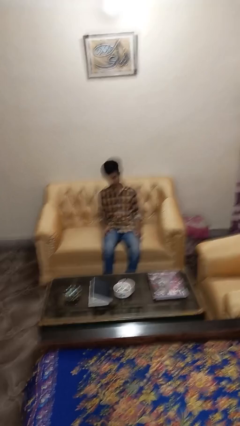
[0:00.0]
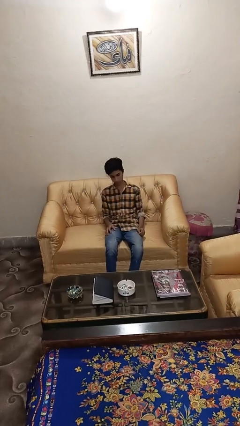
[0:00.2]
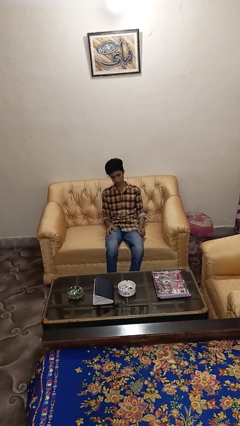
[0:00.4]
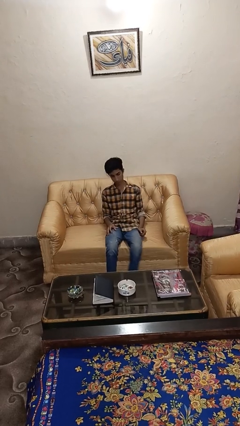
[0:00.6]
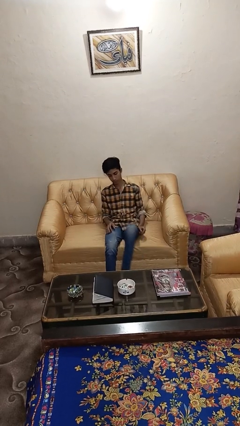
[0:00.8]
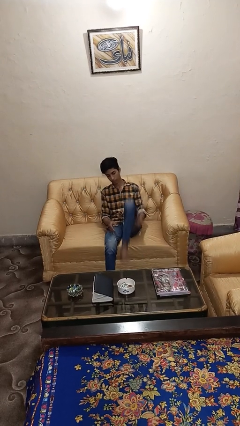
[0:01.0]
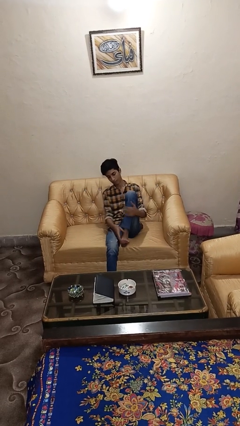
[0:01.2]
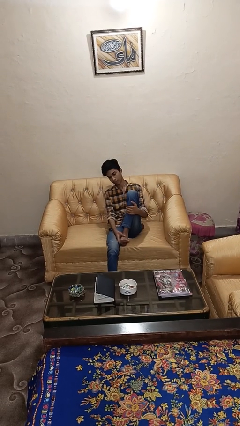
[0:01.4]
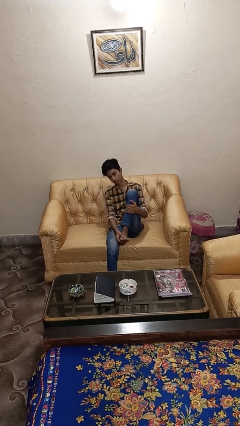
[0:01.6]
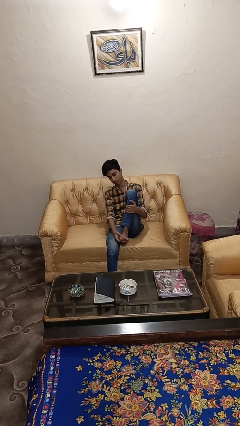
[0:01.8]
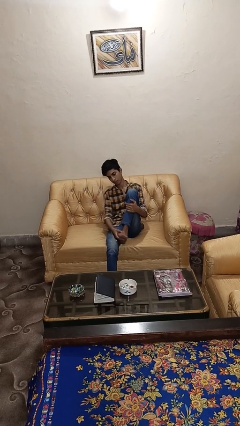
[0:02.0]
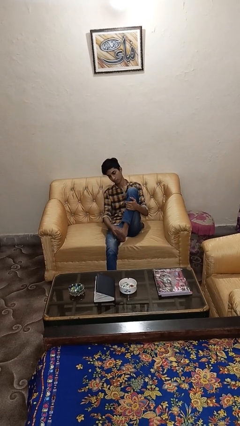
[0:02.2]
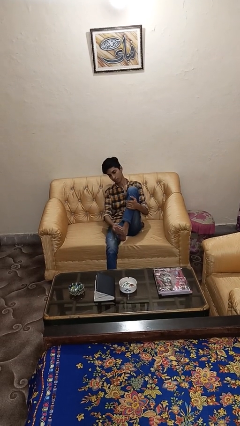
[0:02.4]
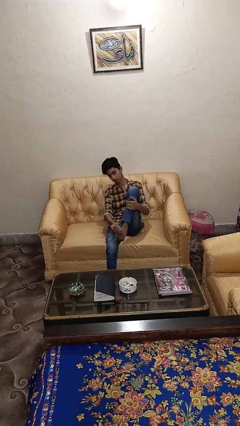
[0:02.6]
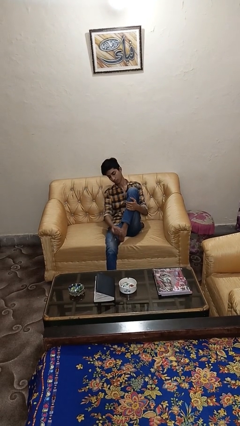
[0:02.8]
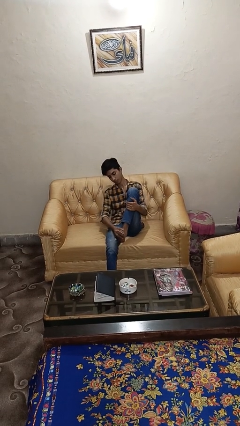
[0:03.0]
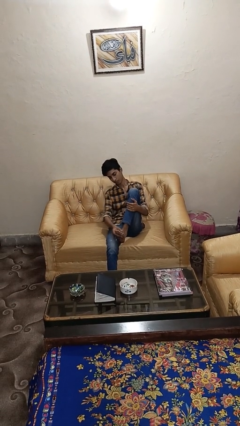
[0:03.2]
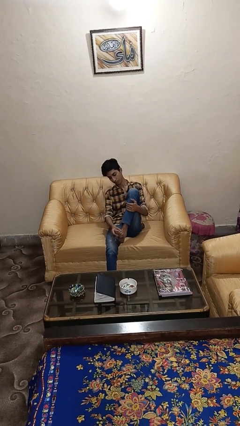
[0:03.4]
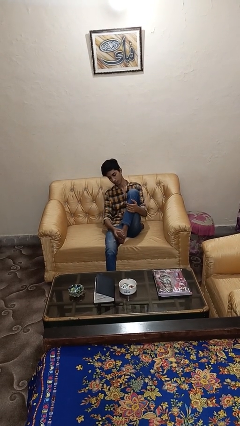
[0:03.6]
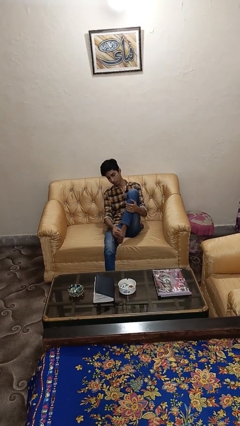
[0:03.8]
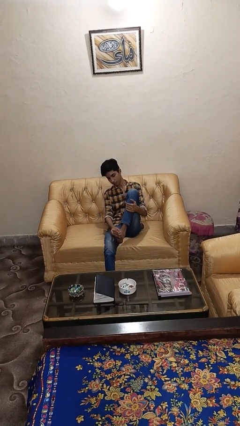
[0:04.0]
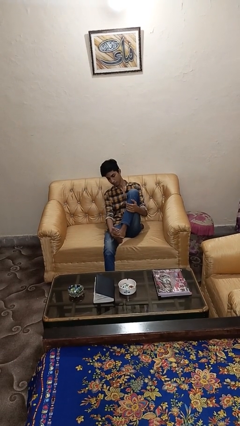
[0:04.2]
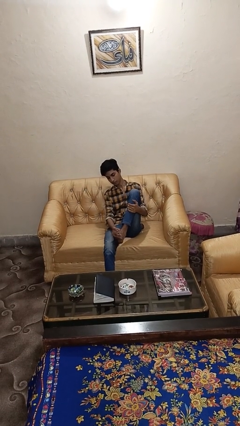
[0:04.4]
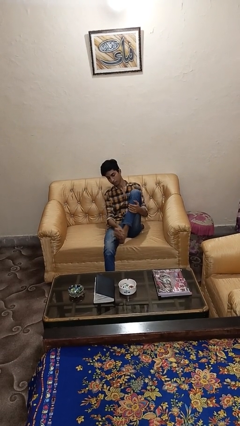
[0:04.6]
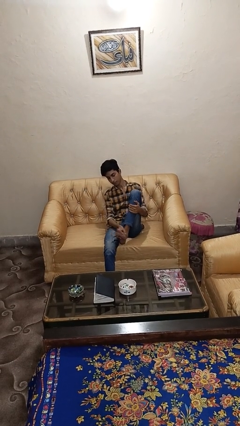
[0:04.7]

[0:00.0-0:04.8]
person rubs foot

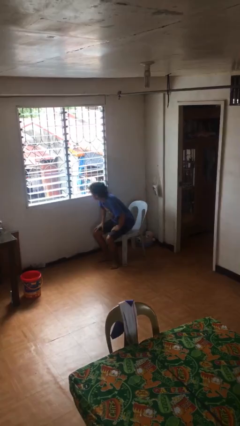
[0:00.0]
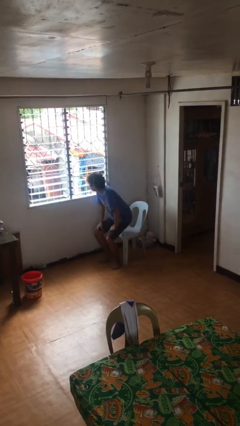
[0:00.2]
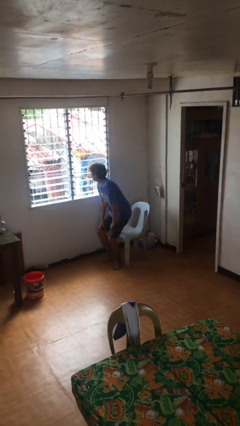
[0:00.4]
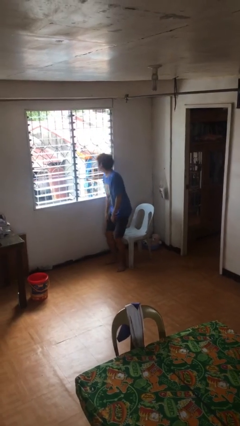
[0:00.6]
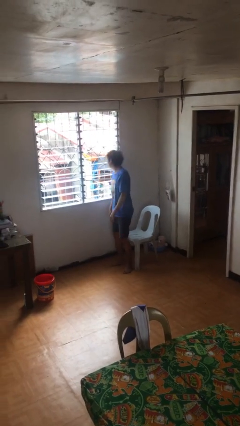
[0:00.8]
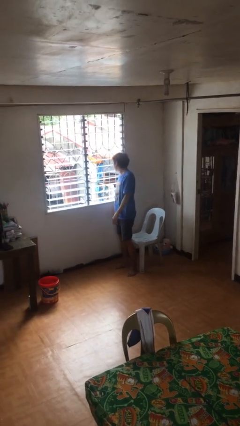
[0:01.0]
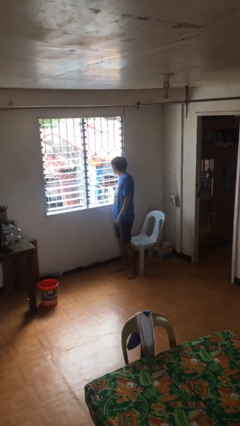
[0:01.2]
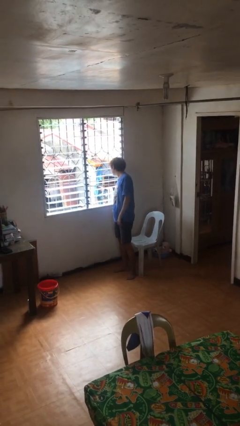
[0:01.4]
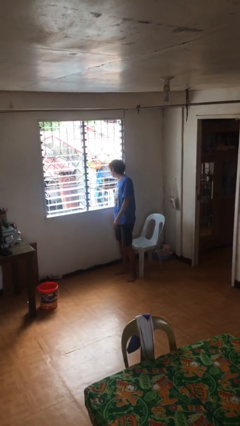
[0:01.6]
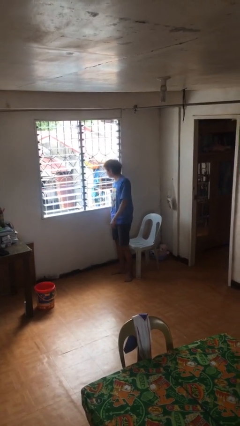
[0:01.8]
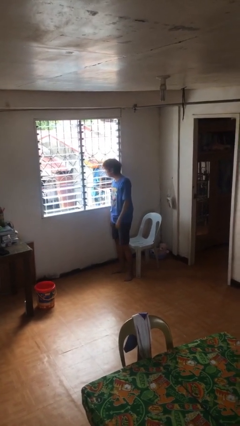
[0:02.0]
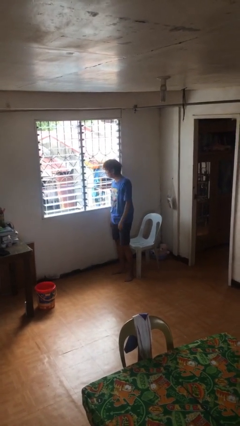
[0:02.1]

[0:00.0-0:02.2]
person stands up

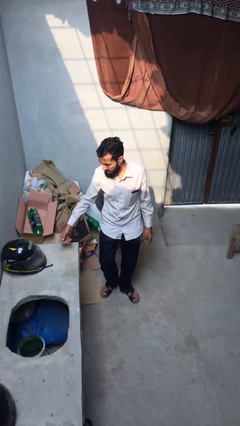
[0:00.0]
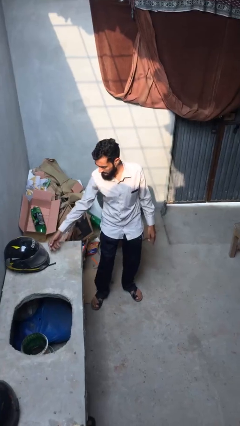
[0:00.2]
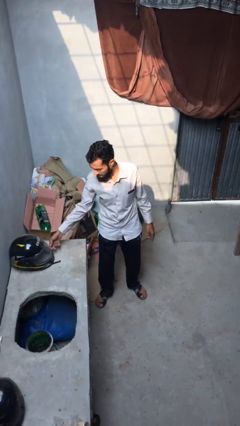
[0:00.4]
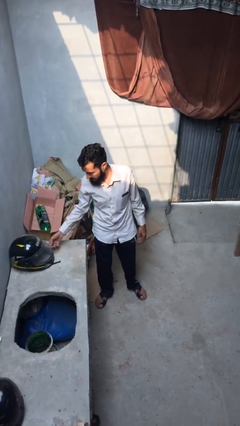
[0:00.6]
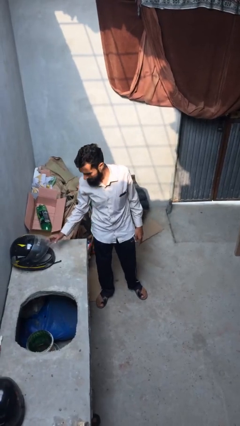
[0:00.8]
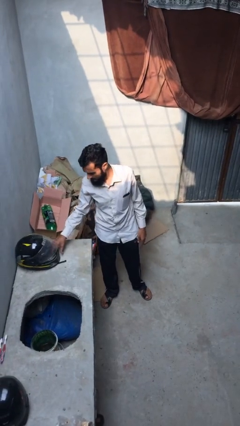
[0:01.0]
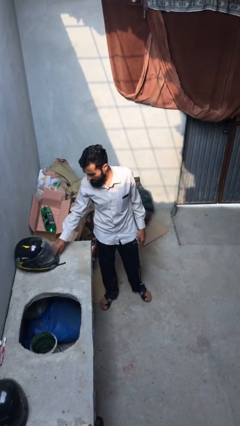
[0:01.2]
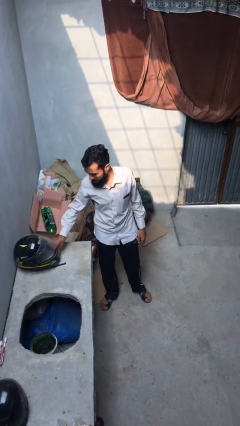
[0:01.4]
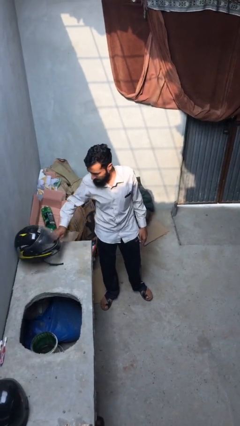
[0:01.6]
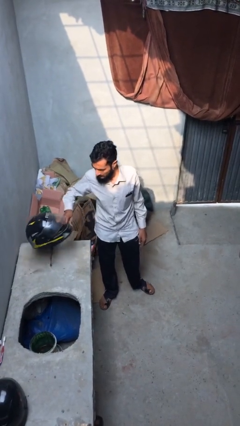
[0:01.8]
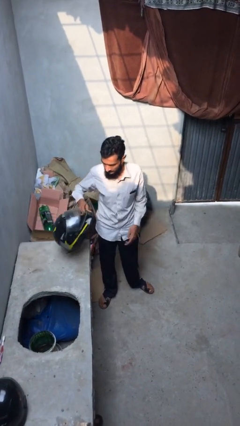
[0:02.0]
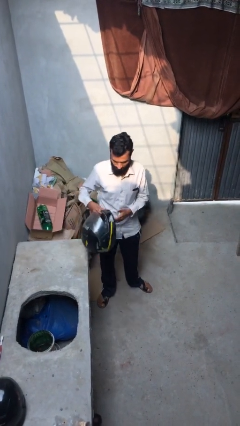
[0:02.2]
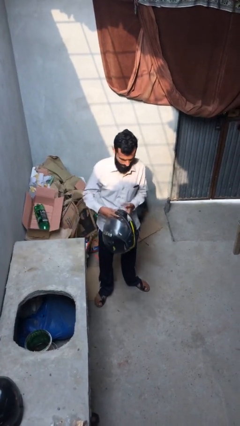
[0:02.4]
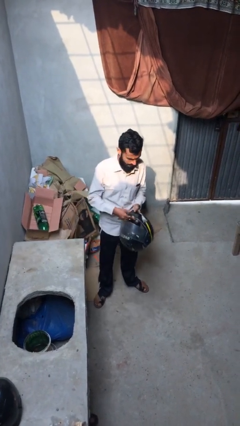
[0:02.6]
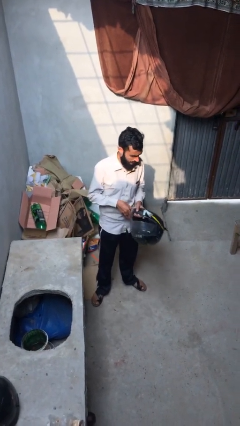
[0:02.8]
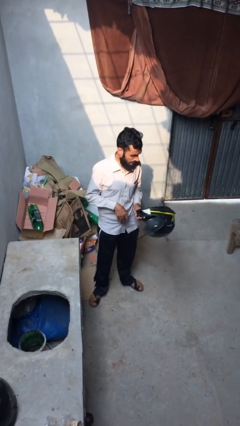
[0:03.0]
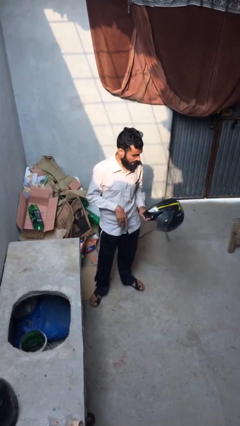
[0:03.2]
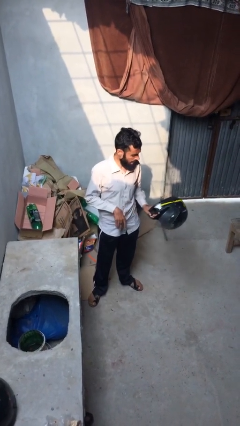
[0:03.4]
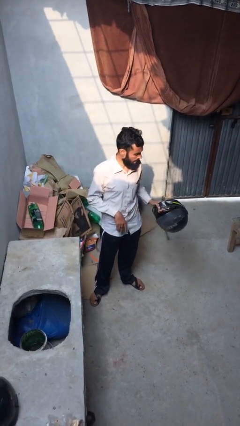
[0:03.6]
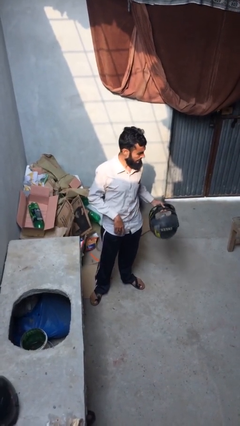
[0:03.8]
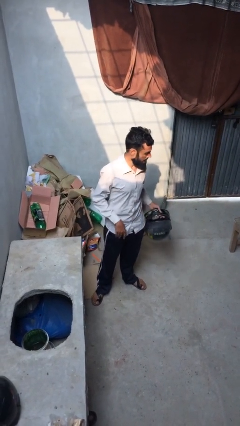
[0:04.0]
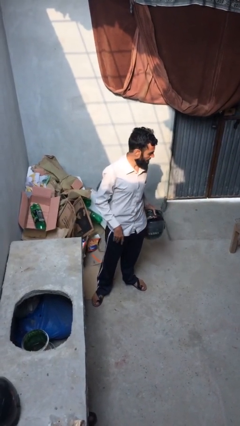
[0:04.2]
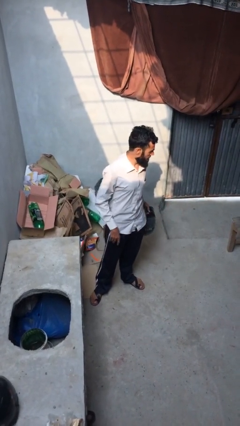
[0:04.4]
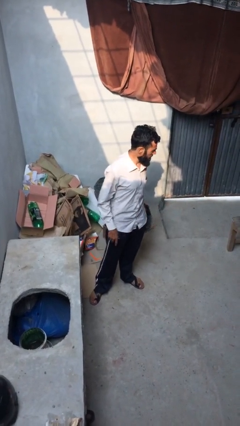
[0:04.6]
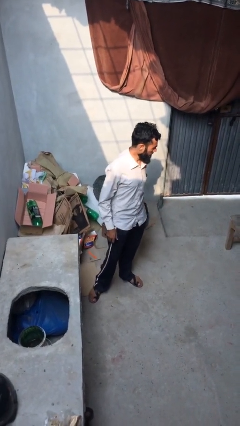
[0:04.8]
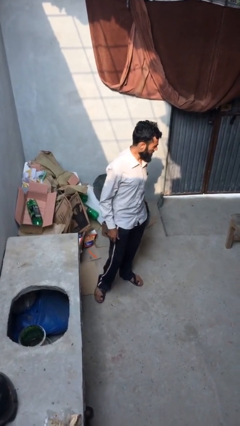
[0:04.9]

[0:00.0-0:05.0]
person picks up object from shelf

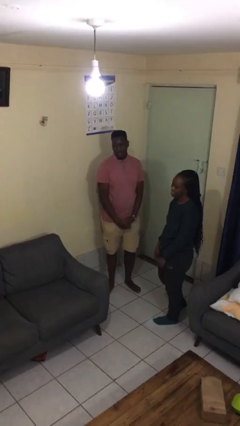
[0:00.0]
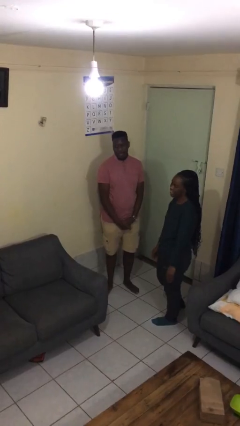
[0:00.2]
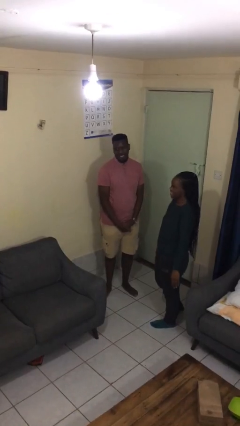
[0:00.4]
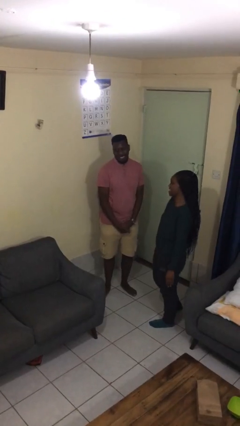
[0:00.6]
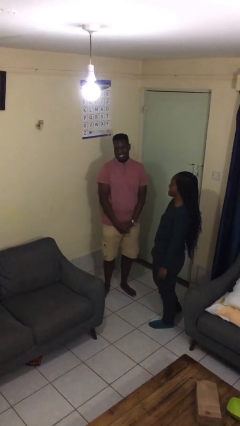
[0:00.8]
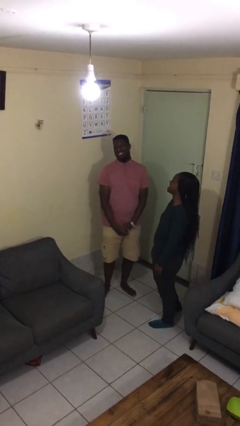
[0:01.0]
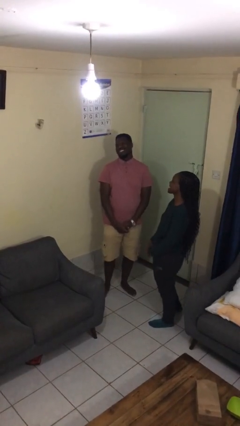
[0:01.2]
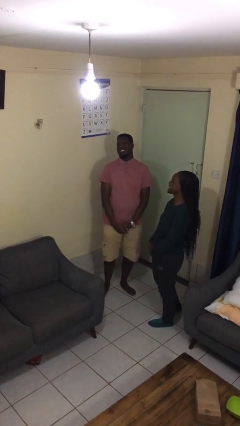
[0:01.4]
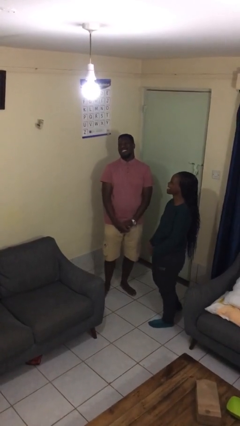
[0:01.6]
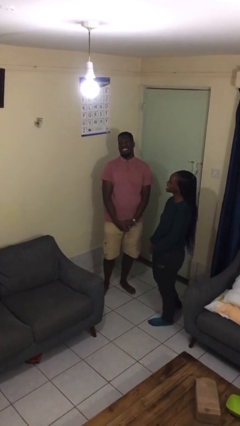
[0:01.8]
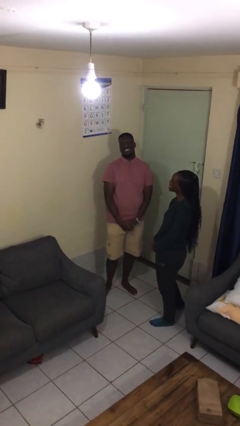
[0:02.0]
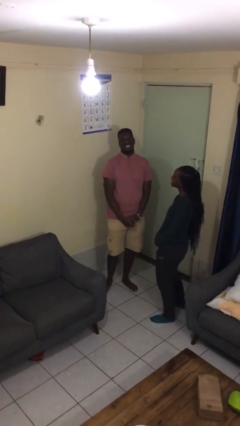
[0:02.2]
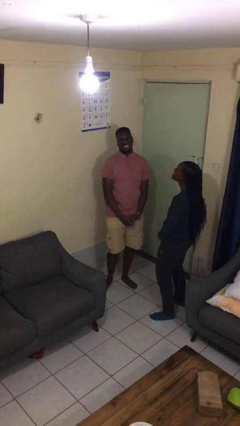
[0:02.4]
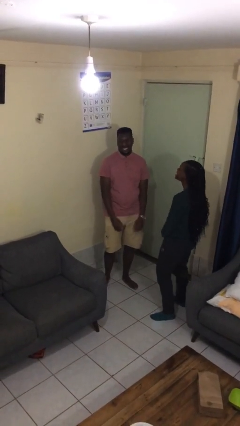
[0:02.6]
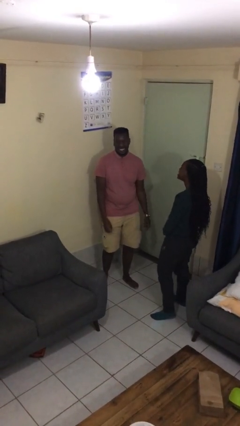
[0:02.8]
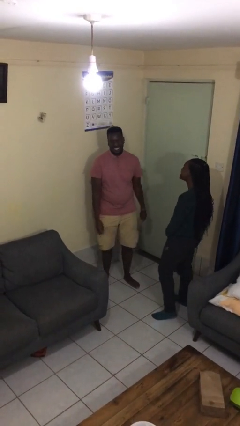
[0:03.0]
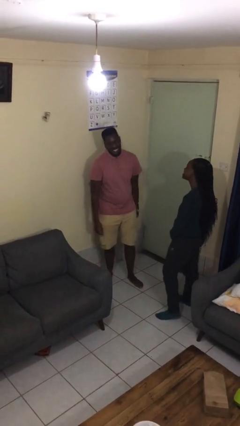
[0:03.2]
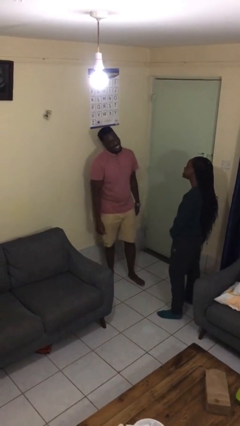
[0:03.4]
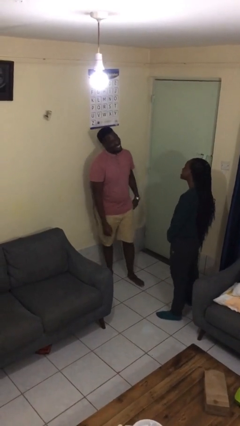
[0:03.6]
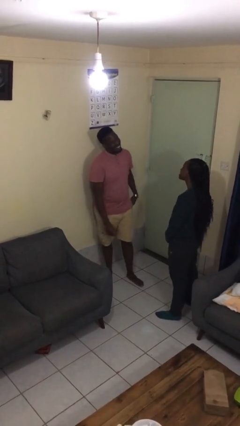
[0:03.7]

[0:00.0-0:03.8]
person laughs with person

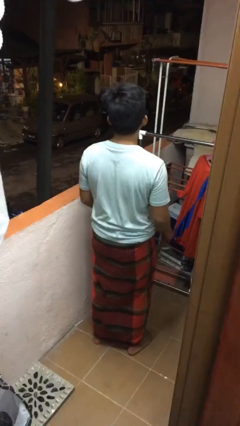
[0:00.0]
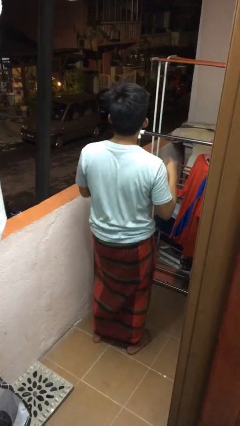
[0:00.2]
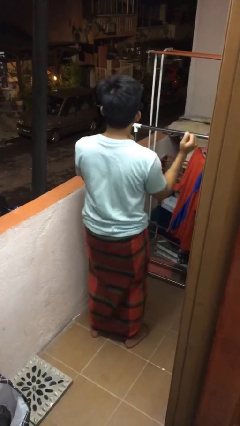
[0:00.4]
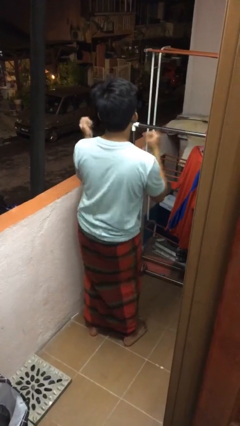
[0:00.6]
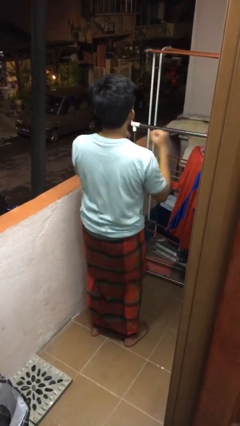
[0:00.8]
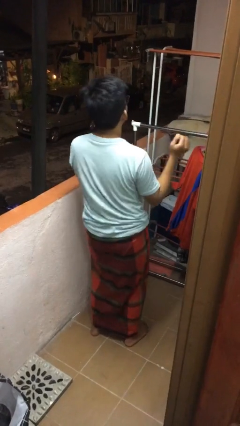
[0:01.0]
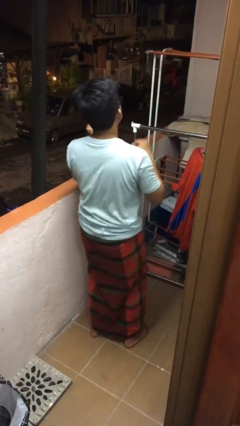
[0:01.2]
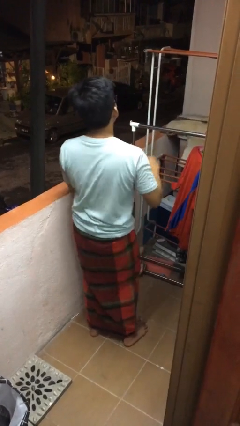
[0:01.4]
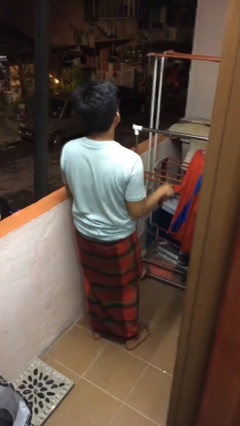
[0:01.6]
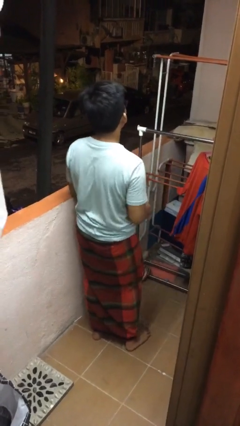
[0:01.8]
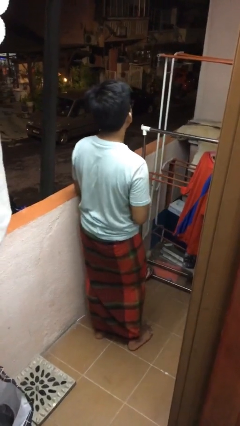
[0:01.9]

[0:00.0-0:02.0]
person dances in place
